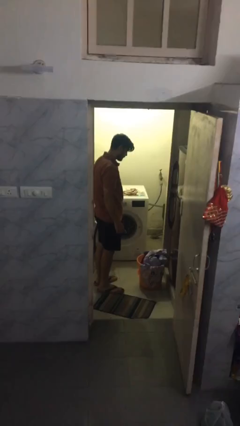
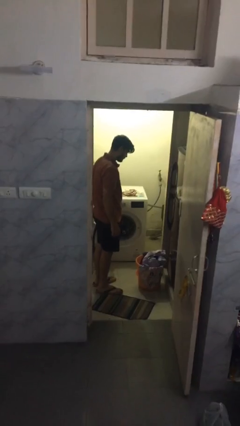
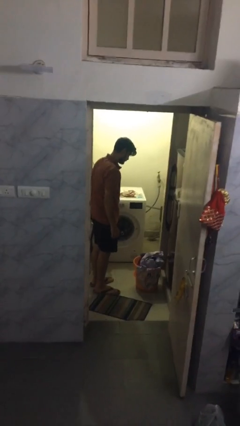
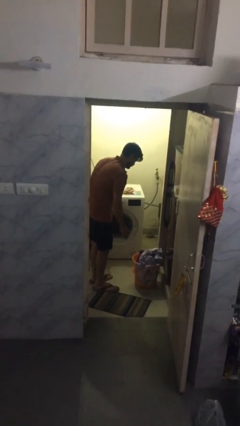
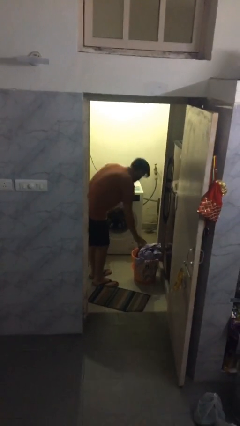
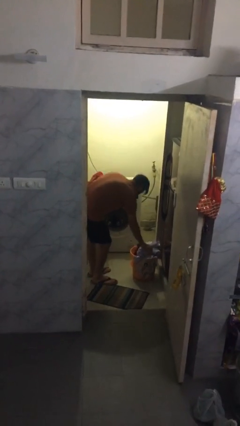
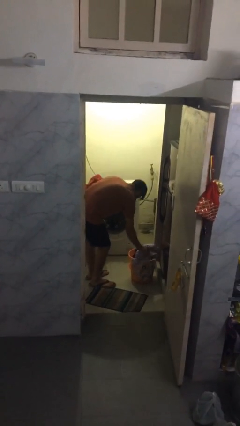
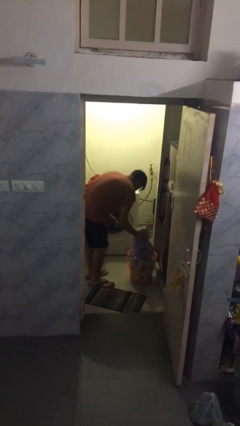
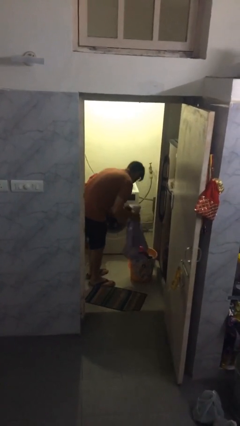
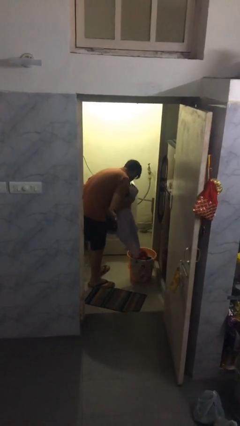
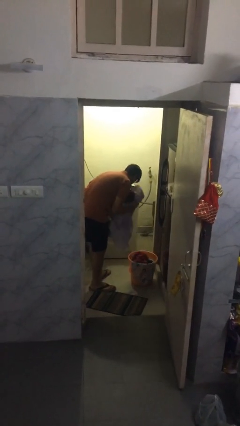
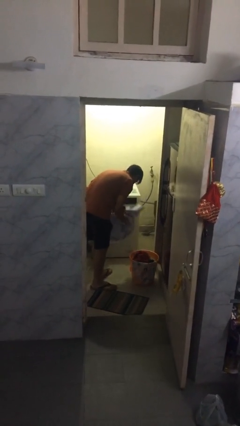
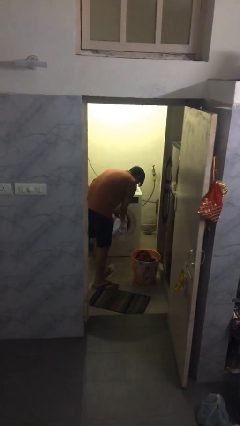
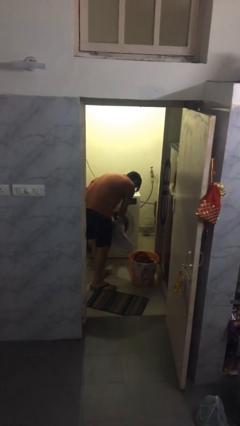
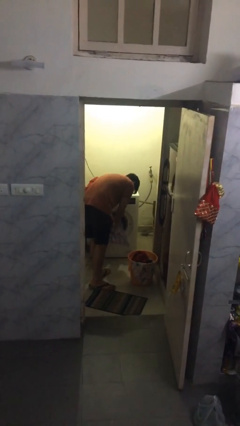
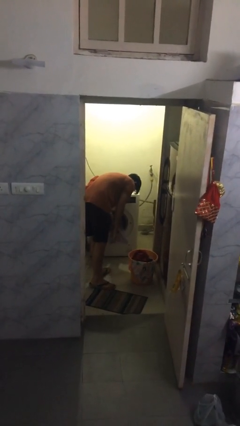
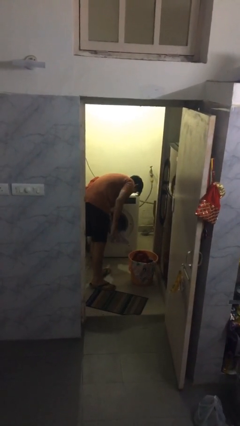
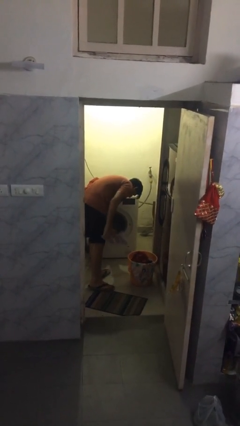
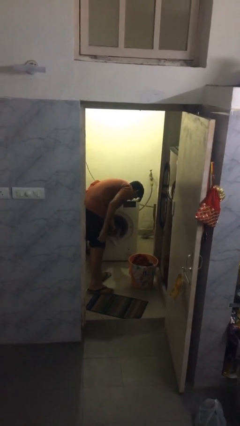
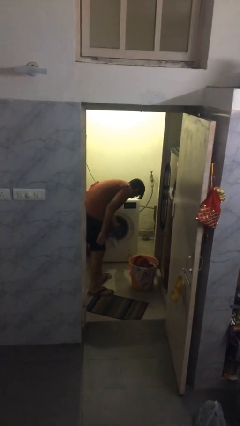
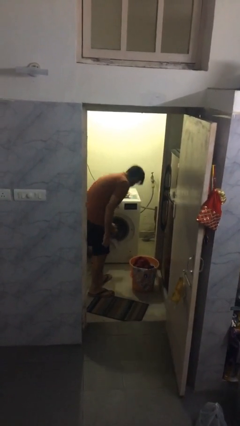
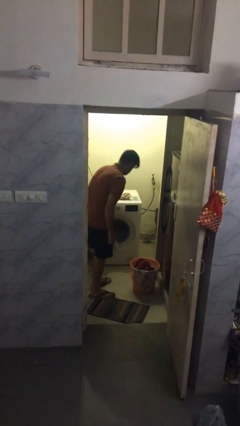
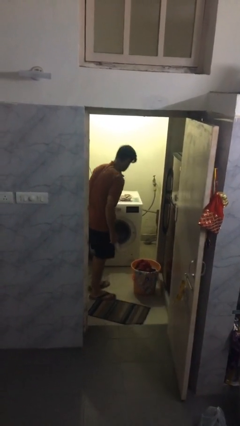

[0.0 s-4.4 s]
person loads dryer

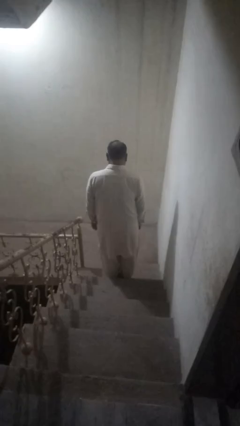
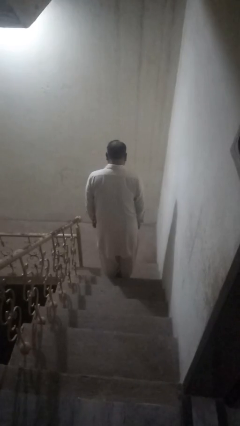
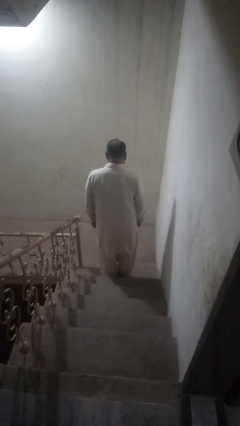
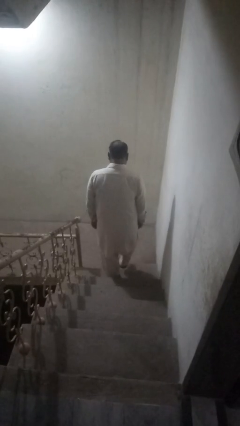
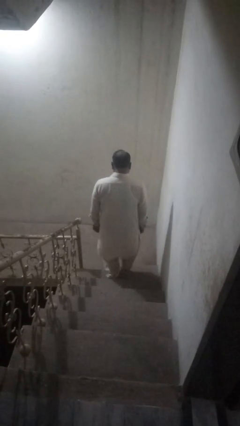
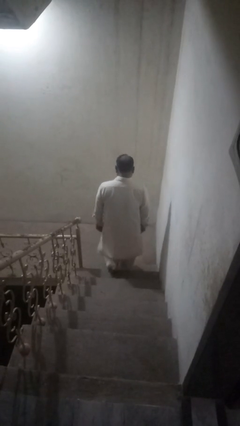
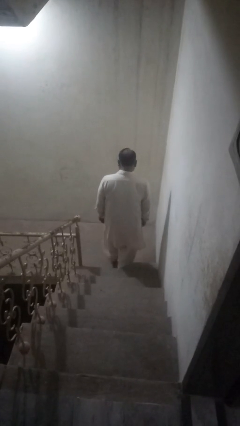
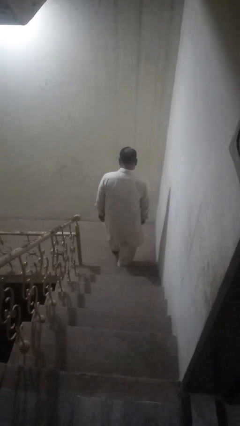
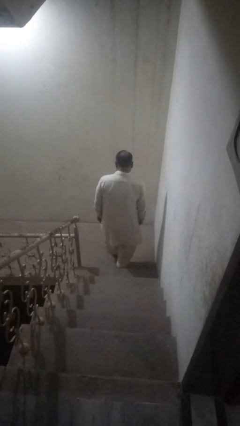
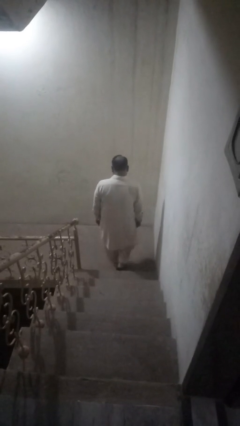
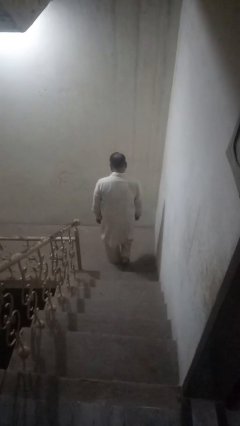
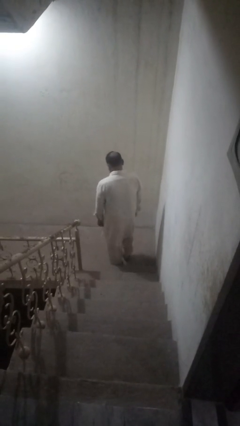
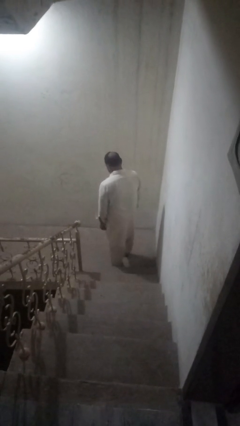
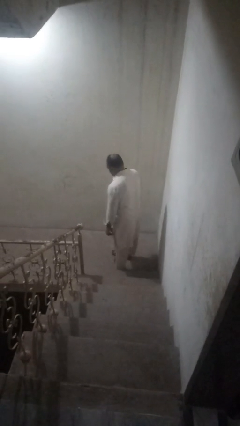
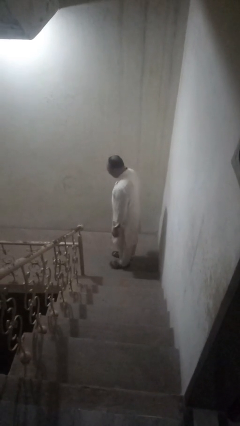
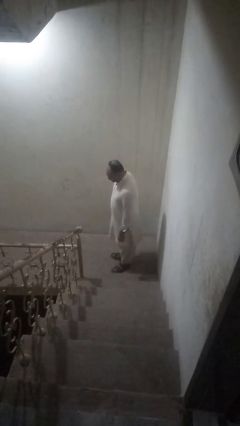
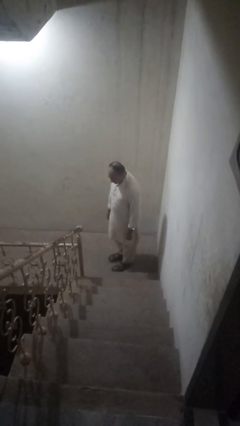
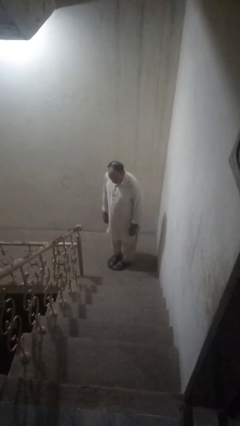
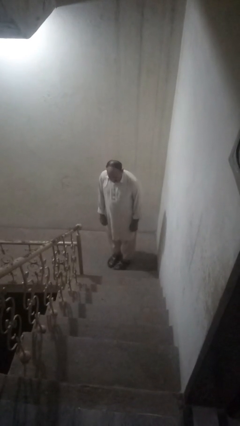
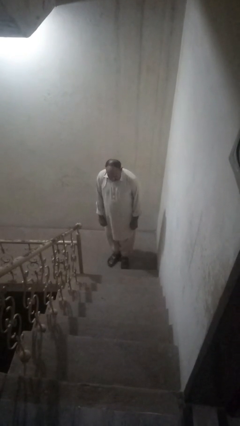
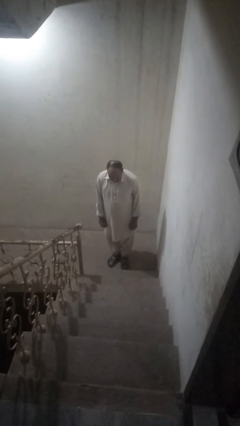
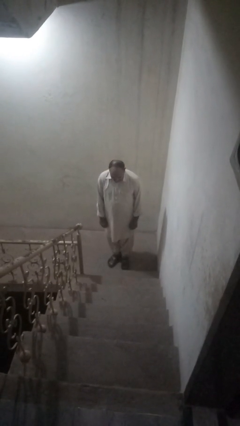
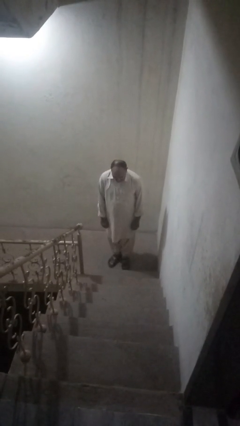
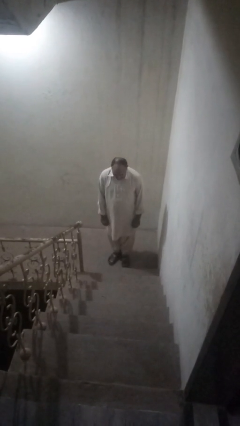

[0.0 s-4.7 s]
person climbs down stairs

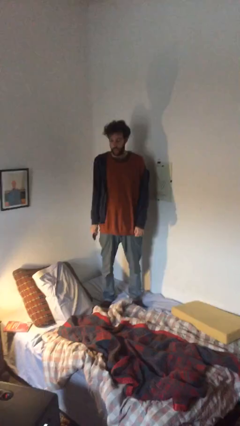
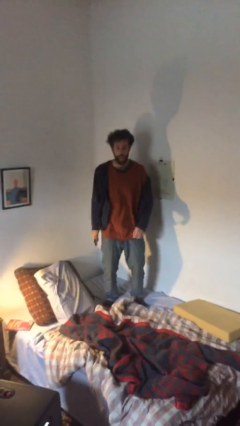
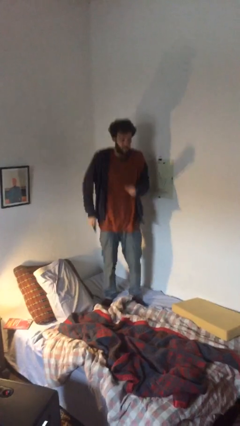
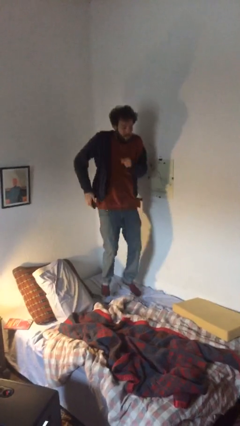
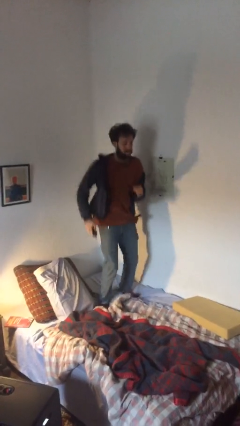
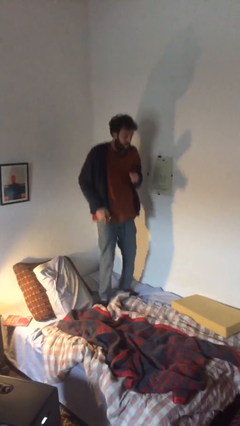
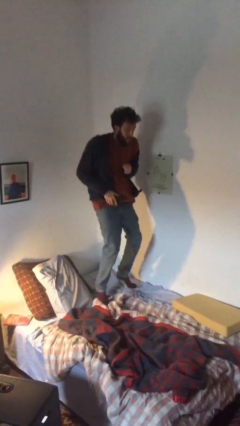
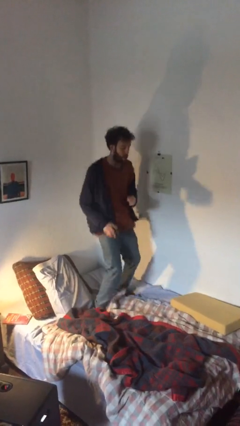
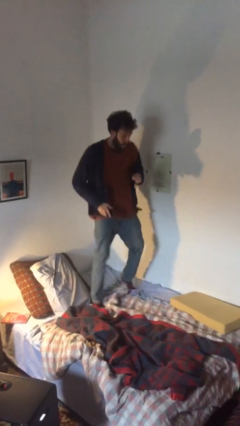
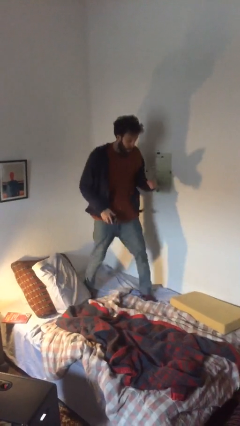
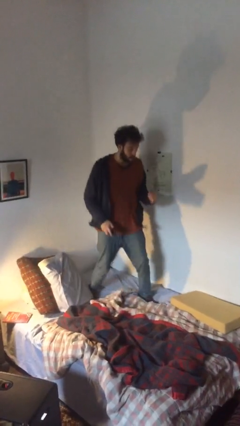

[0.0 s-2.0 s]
person jumps on bed

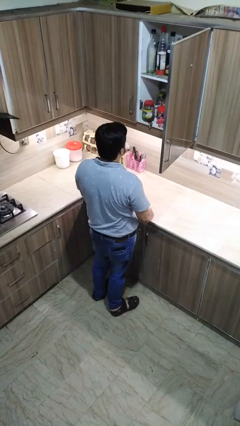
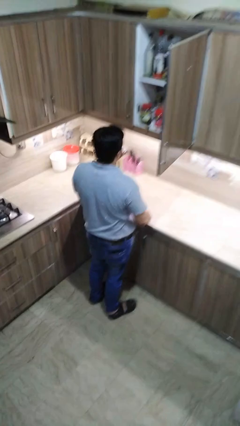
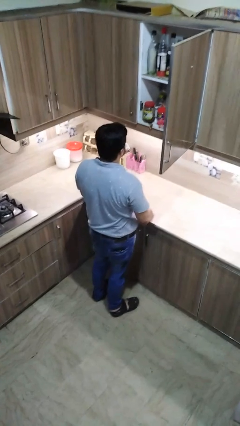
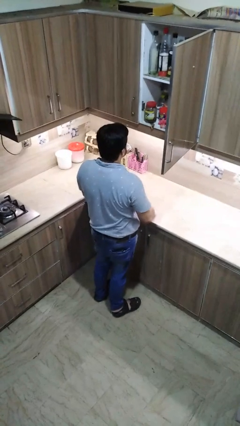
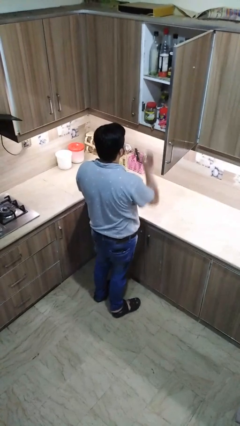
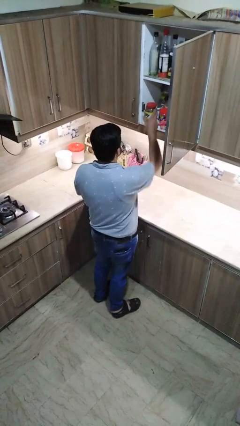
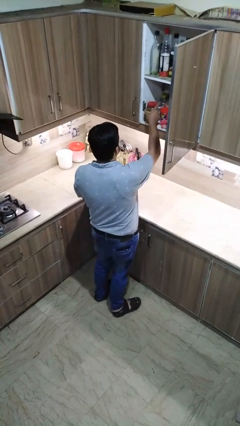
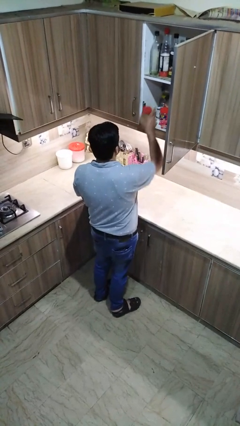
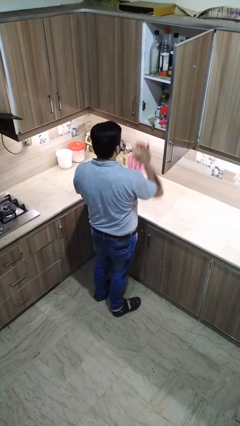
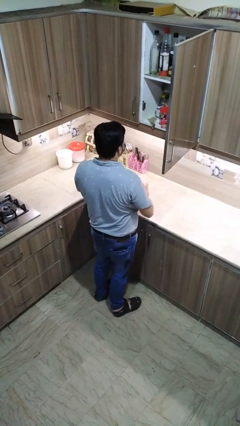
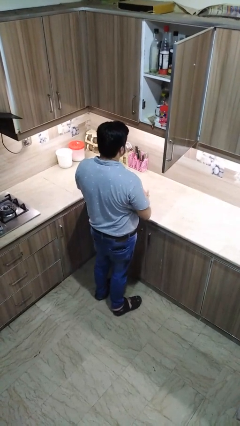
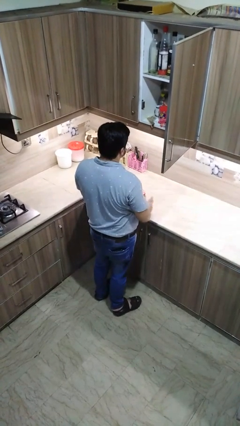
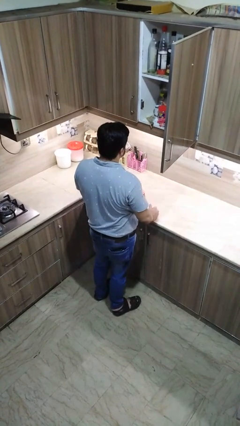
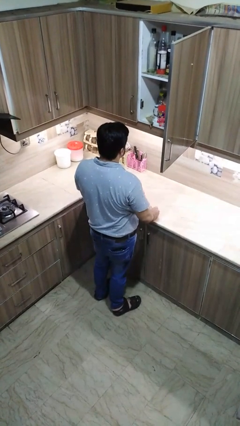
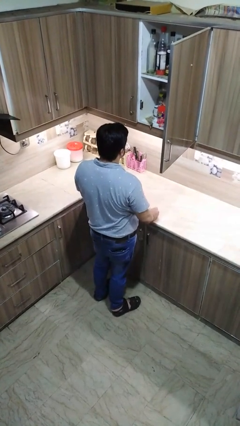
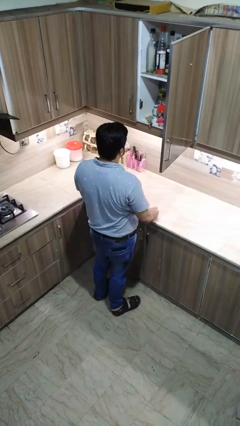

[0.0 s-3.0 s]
person puts object in cabinet

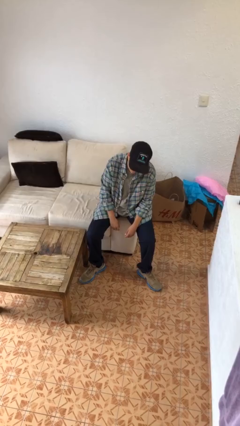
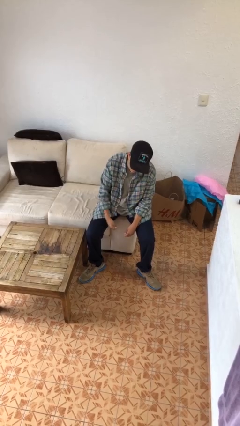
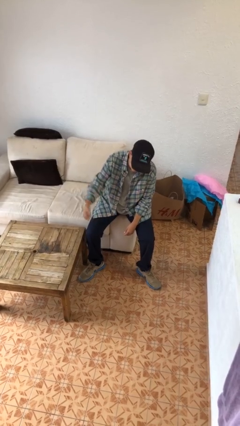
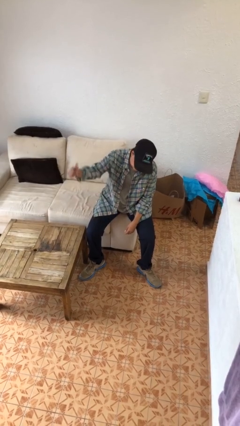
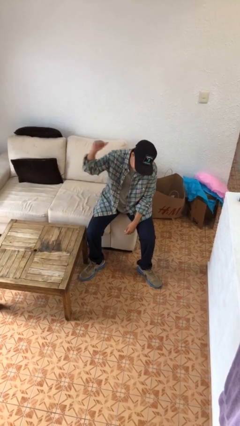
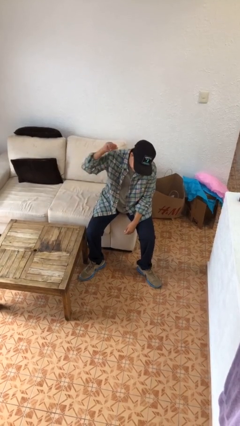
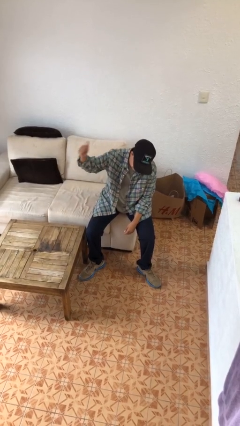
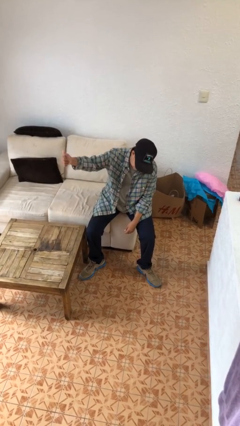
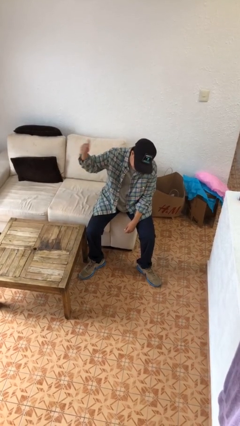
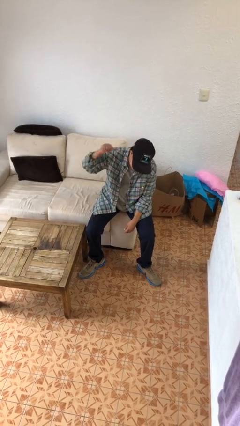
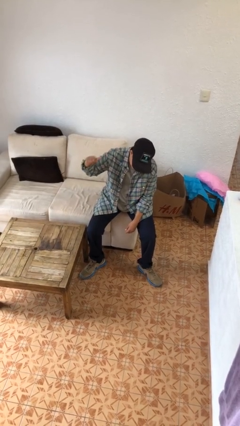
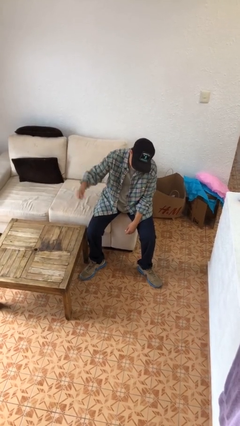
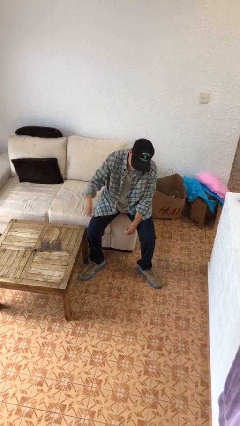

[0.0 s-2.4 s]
person gestures behind me

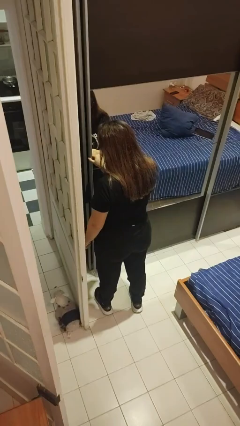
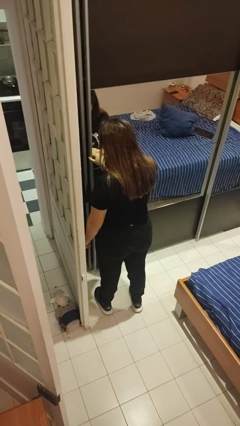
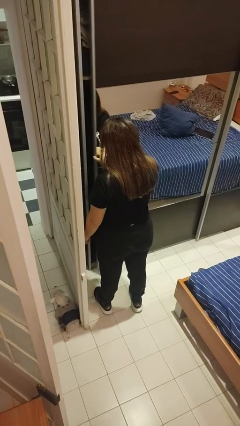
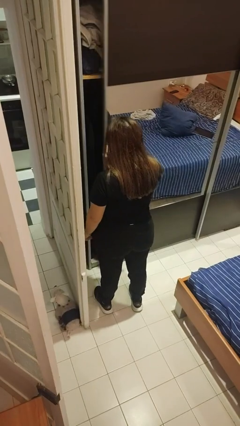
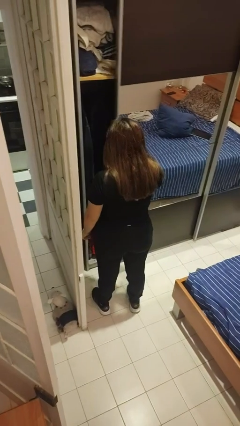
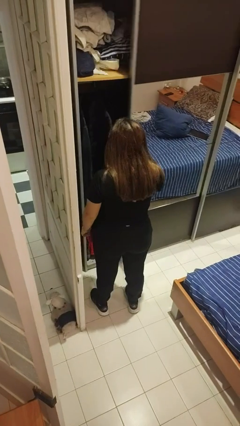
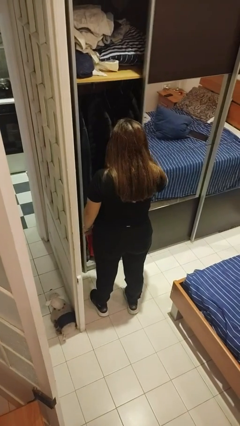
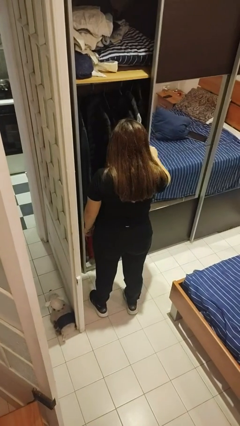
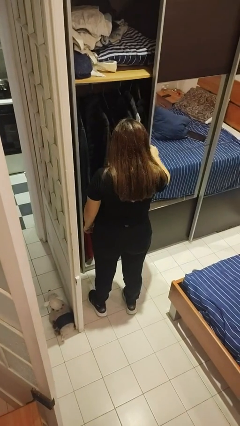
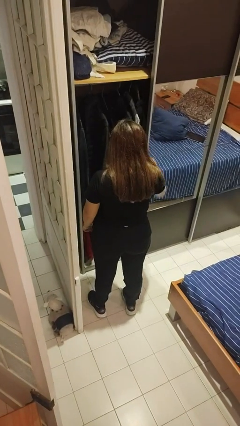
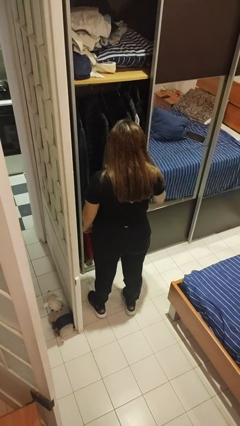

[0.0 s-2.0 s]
person opens dresser drawer
